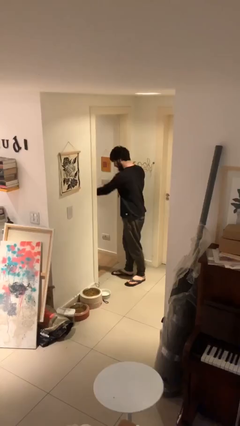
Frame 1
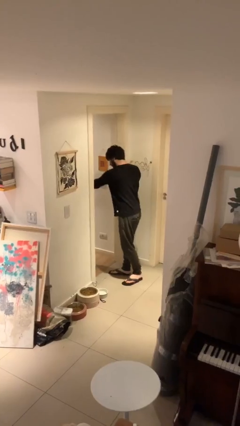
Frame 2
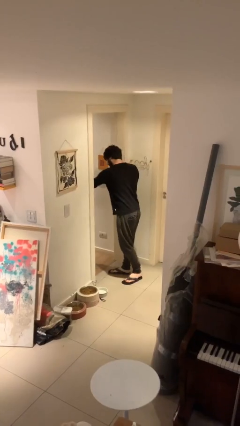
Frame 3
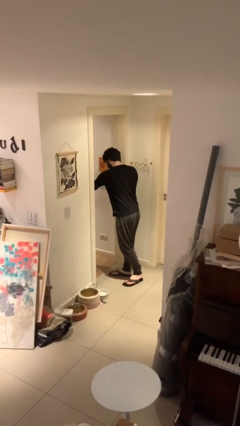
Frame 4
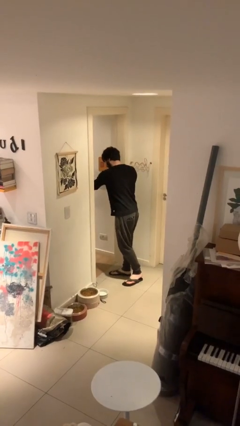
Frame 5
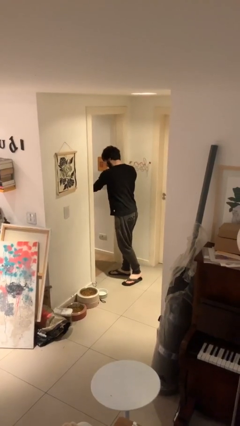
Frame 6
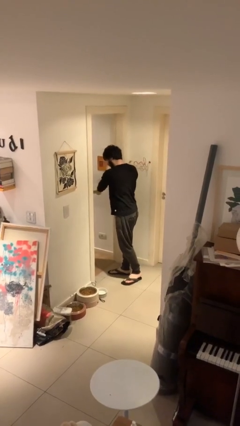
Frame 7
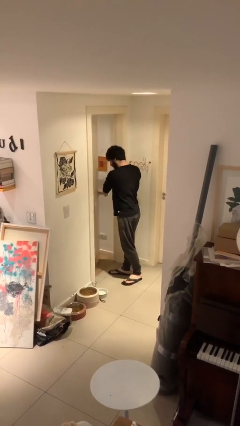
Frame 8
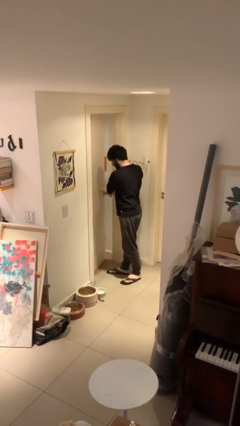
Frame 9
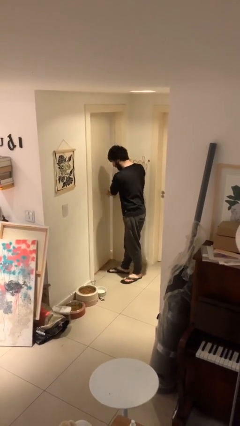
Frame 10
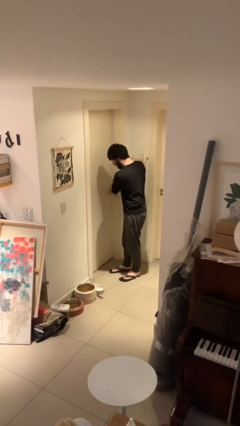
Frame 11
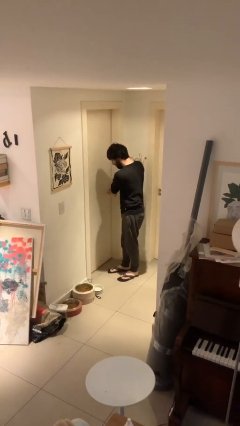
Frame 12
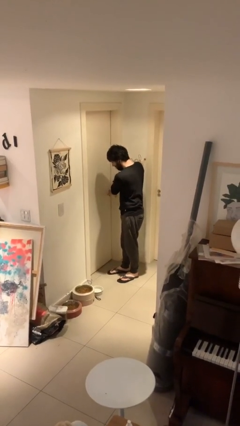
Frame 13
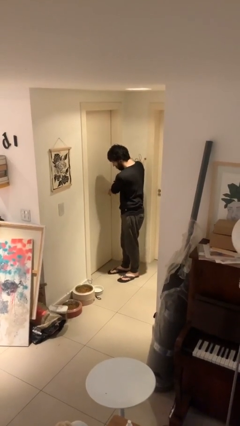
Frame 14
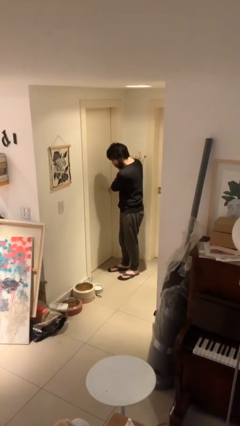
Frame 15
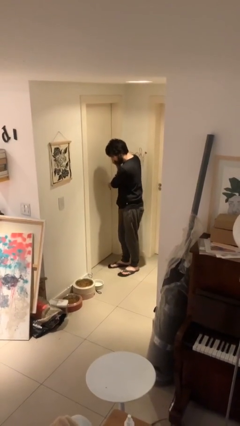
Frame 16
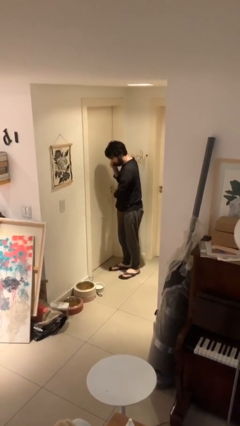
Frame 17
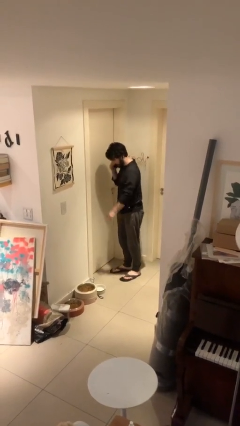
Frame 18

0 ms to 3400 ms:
person closes facility door

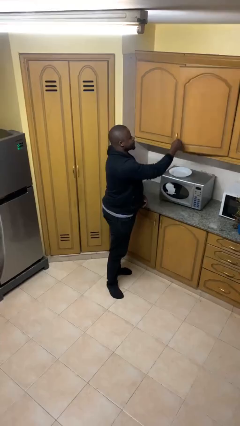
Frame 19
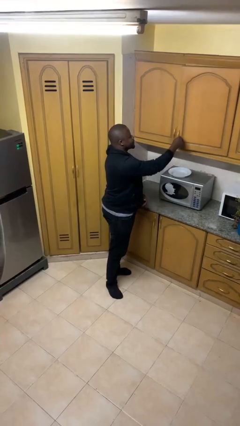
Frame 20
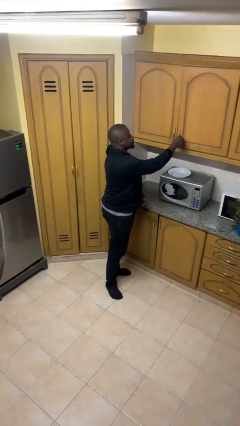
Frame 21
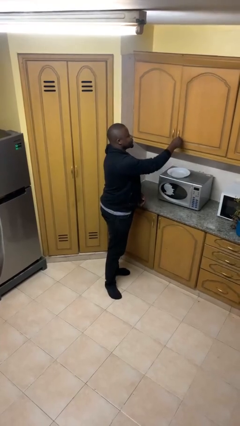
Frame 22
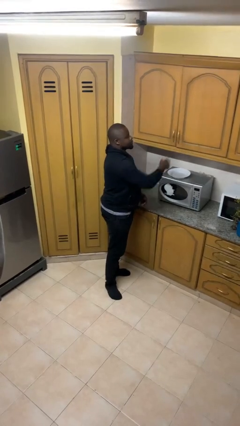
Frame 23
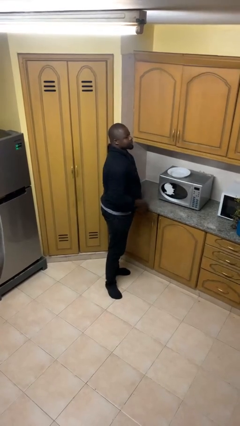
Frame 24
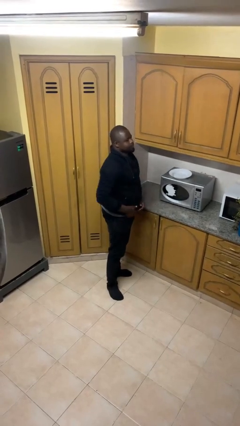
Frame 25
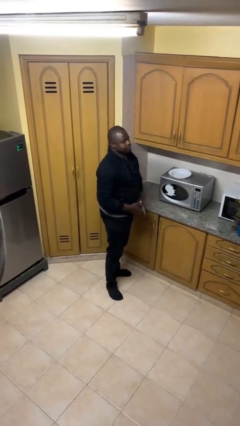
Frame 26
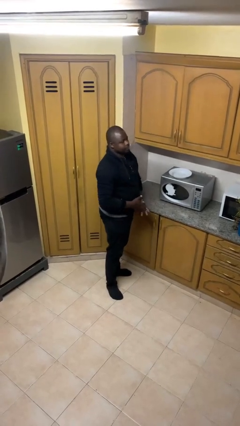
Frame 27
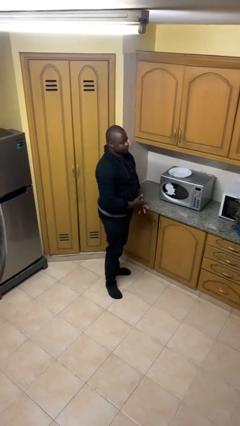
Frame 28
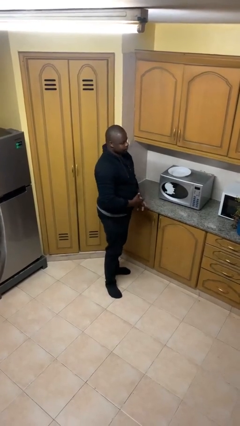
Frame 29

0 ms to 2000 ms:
person closes cabinet

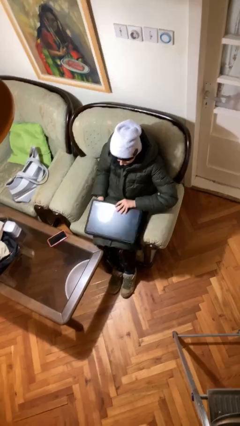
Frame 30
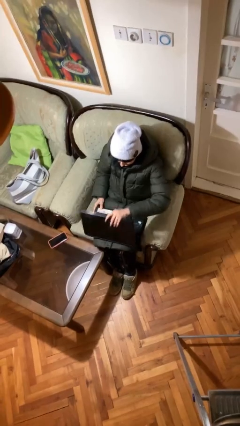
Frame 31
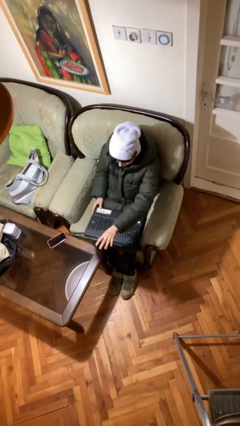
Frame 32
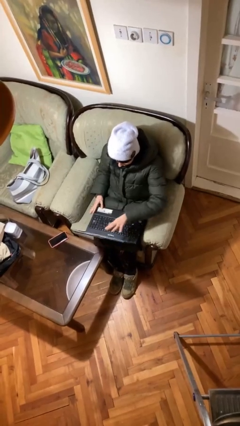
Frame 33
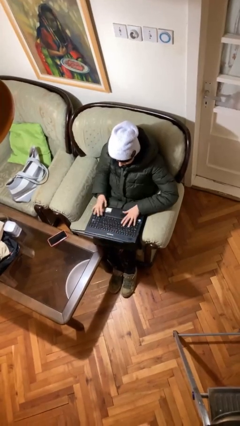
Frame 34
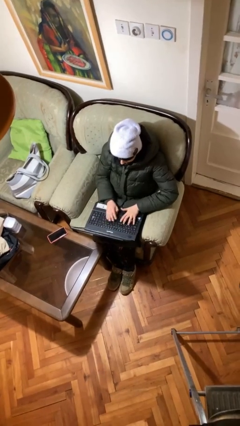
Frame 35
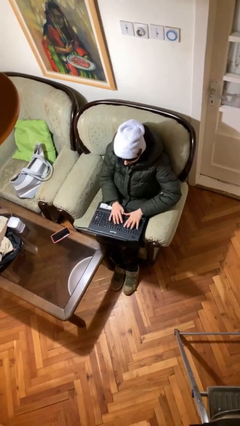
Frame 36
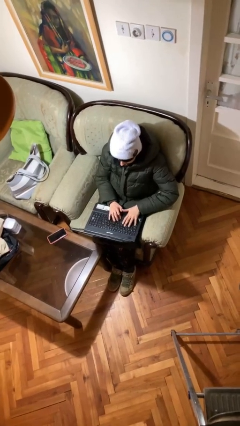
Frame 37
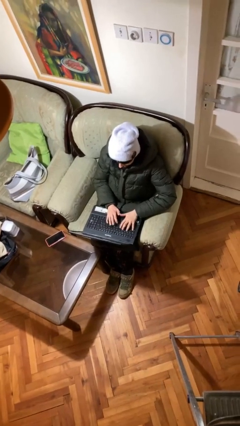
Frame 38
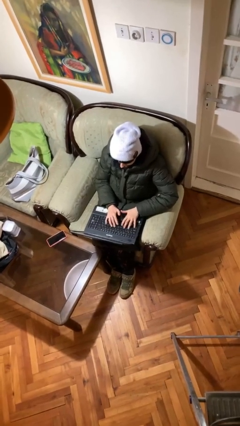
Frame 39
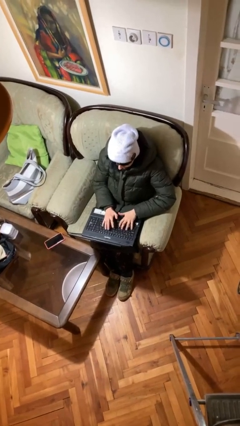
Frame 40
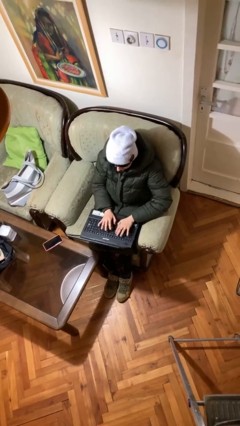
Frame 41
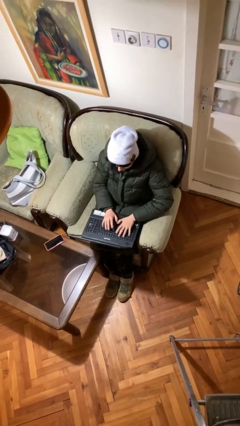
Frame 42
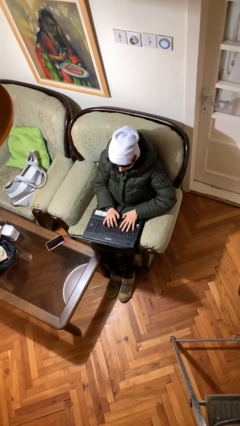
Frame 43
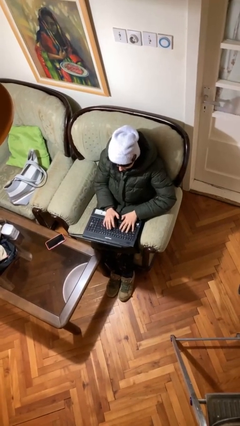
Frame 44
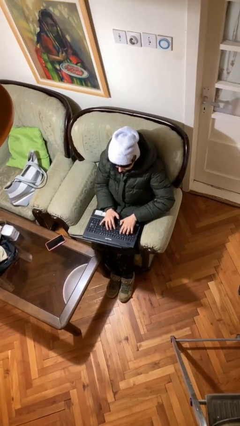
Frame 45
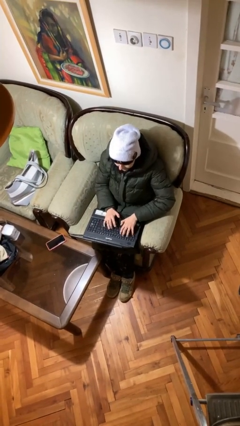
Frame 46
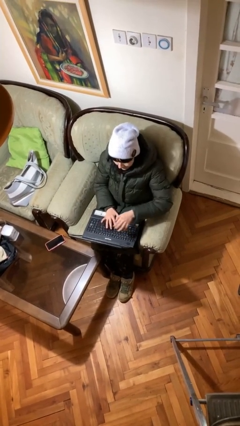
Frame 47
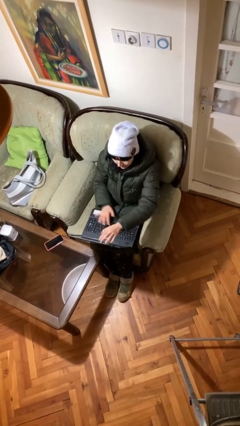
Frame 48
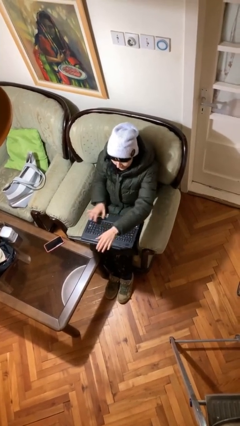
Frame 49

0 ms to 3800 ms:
person interacts with laptop

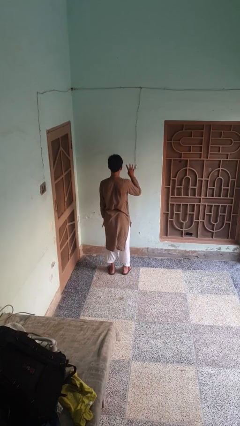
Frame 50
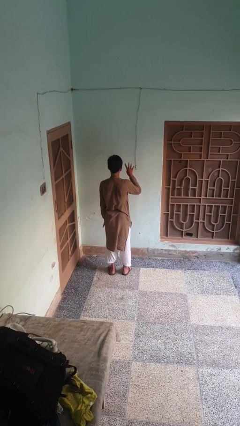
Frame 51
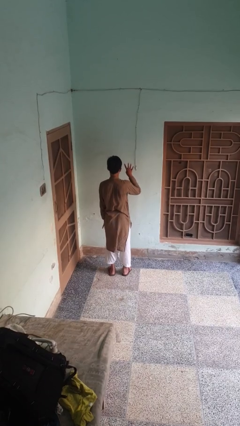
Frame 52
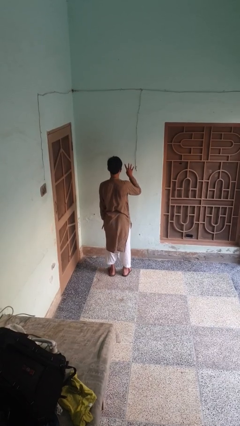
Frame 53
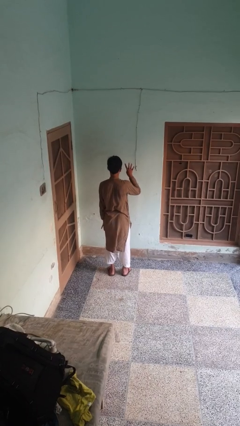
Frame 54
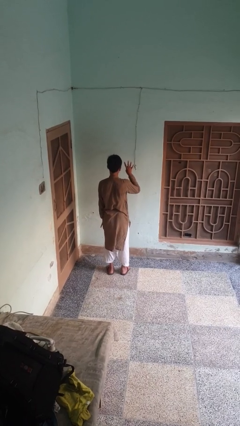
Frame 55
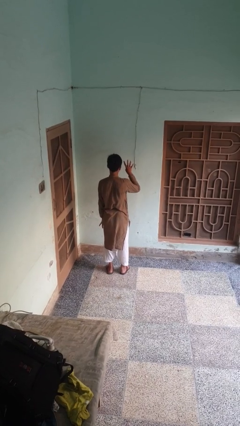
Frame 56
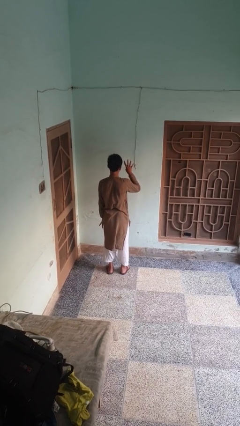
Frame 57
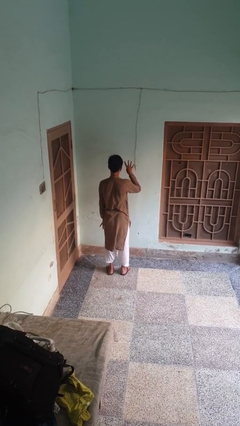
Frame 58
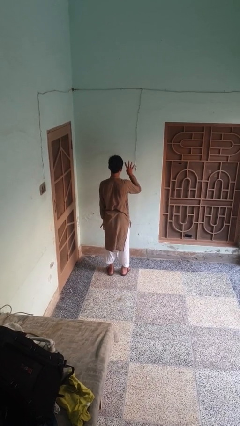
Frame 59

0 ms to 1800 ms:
person gestures number four

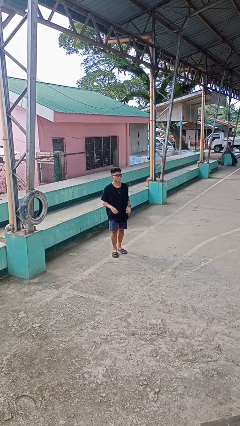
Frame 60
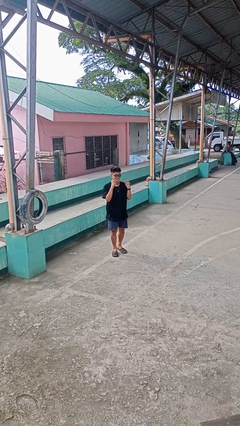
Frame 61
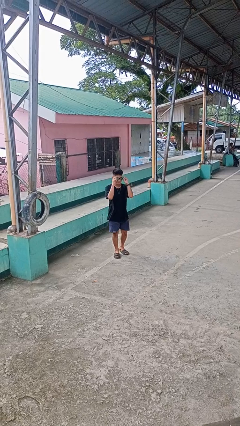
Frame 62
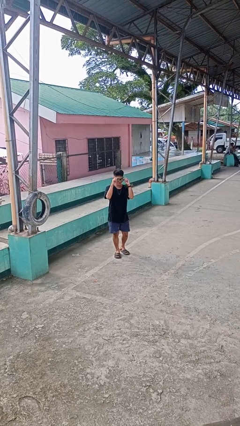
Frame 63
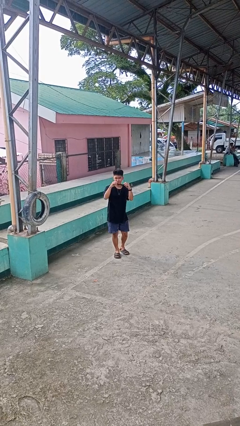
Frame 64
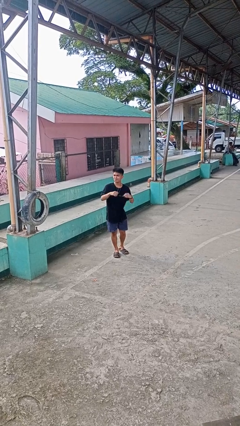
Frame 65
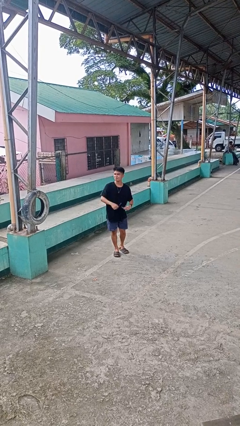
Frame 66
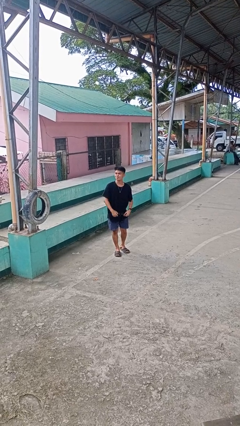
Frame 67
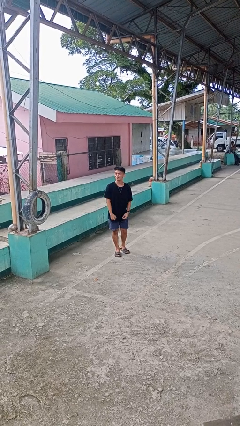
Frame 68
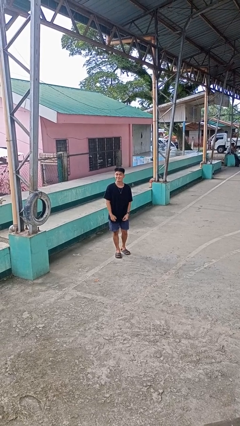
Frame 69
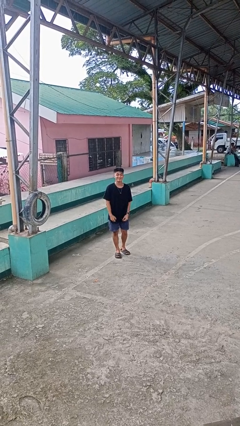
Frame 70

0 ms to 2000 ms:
person takes off sunglasses

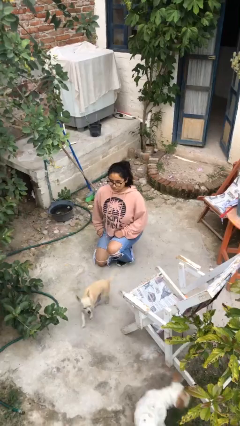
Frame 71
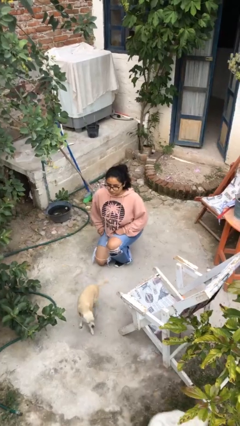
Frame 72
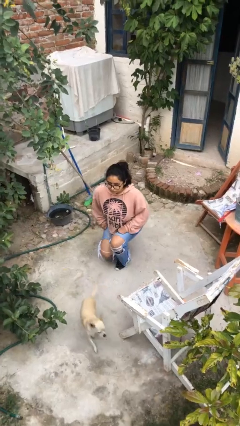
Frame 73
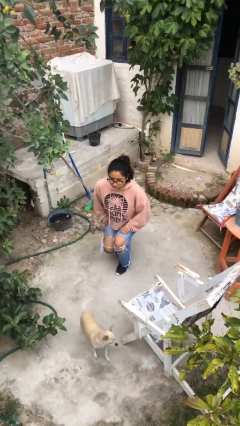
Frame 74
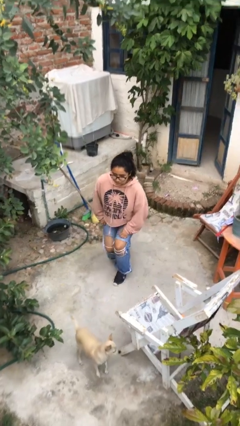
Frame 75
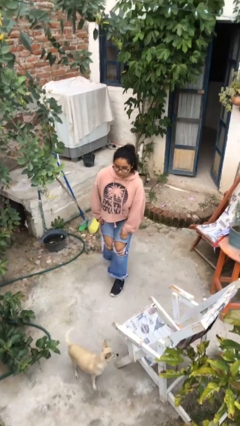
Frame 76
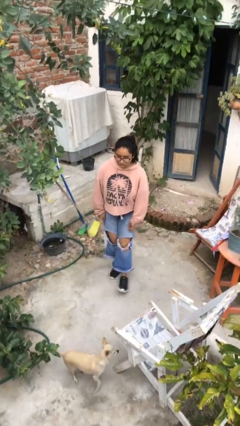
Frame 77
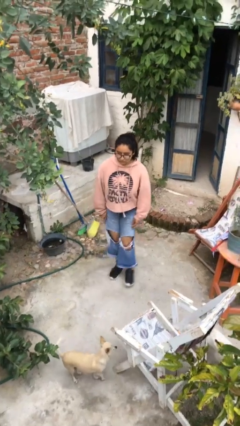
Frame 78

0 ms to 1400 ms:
person stands up from floor

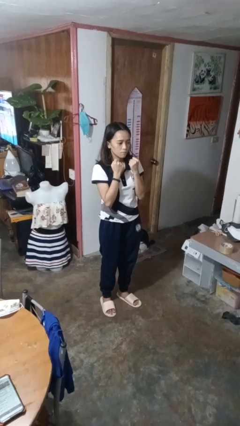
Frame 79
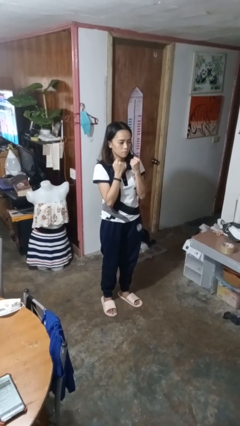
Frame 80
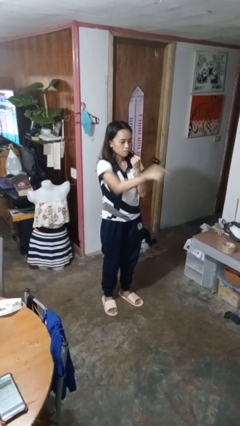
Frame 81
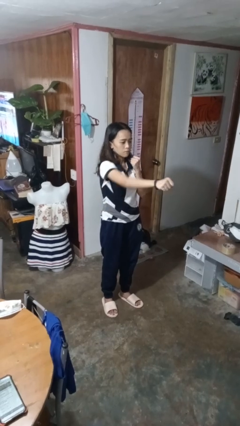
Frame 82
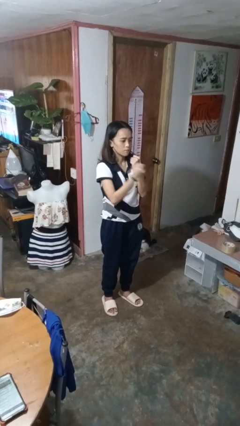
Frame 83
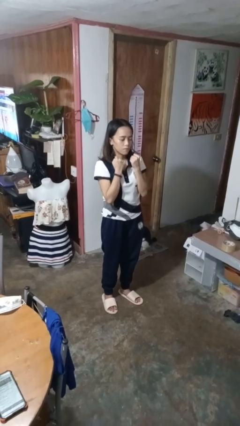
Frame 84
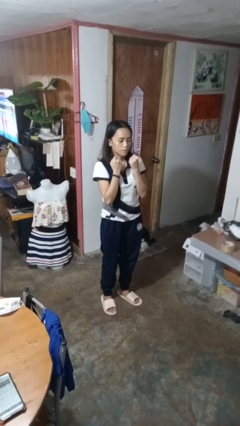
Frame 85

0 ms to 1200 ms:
person punches

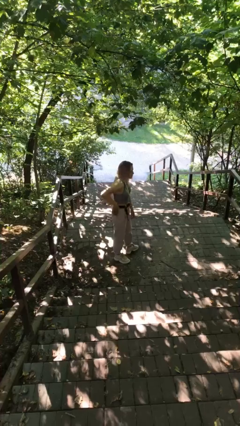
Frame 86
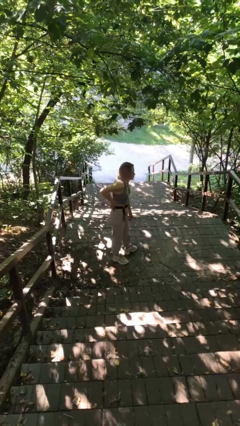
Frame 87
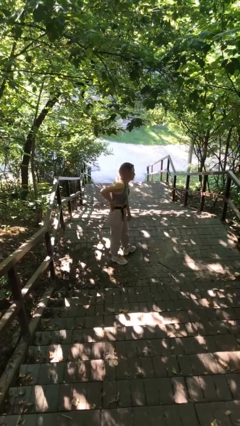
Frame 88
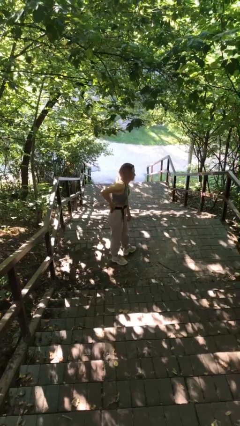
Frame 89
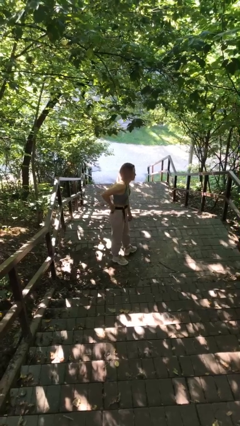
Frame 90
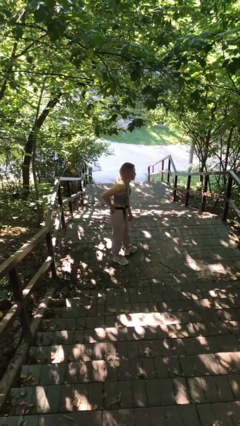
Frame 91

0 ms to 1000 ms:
person puts phone into pocket

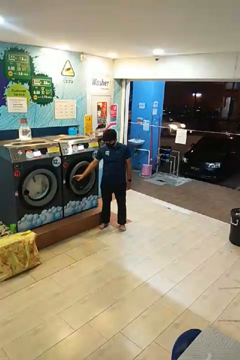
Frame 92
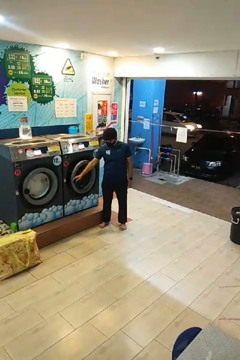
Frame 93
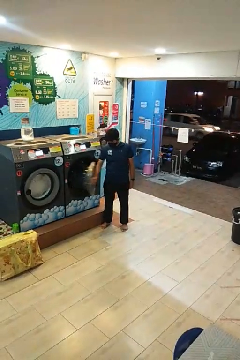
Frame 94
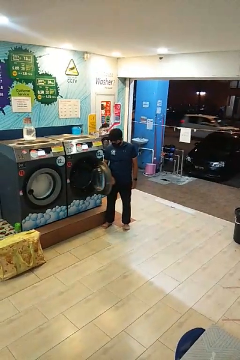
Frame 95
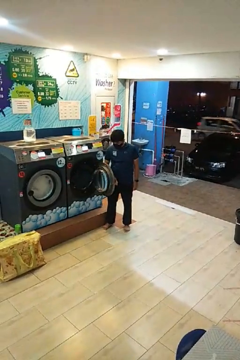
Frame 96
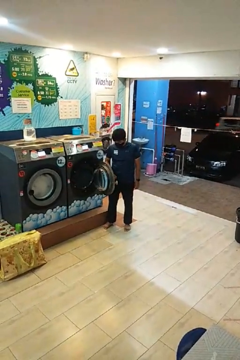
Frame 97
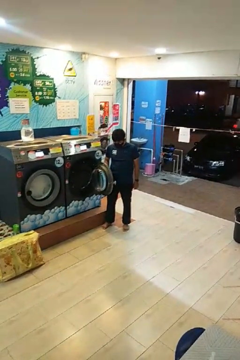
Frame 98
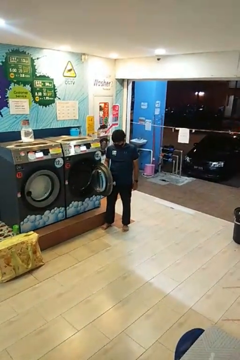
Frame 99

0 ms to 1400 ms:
person opens clothes washer
